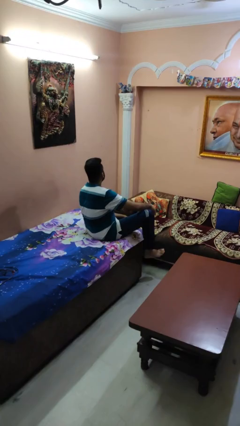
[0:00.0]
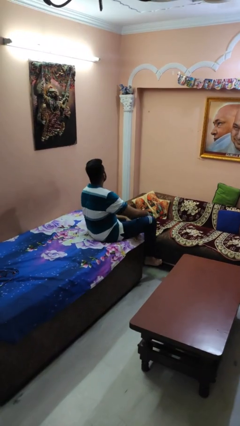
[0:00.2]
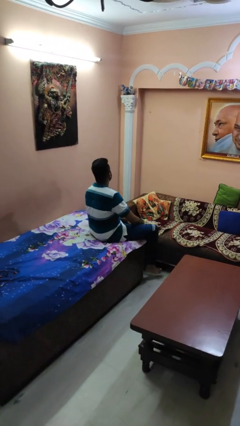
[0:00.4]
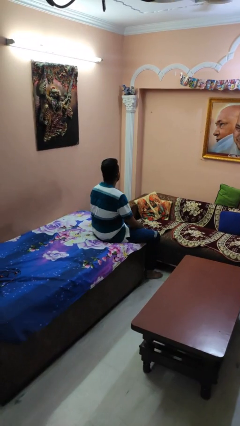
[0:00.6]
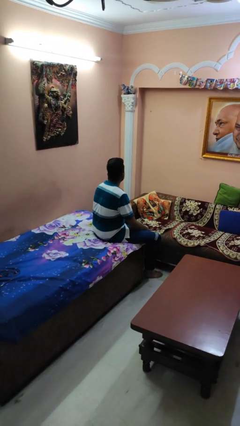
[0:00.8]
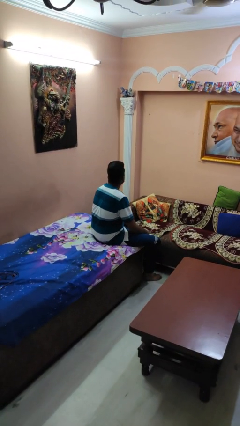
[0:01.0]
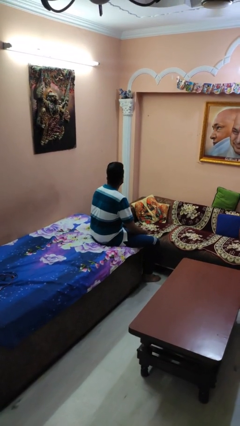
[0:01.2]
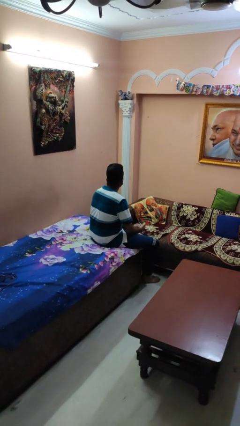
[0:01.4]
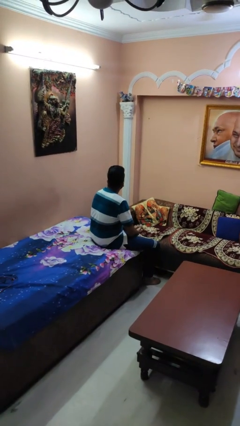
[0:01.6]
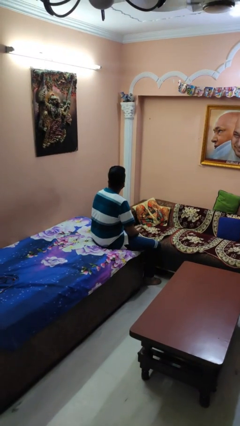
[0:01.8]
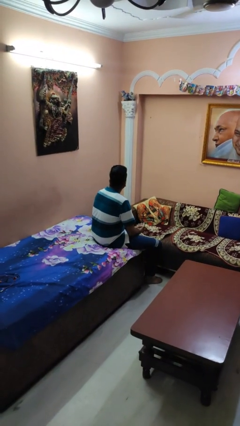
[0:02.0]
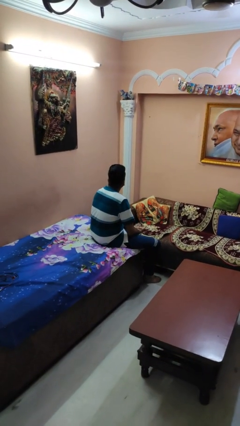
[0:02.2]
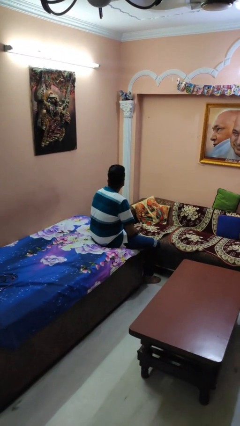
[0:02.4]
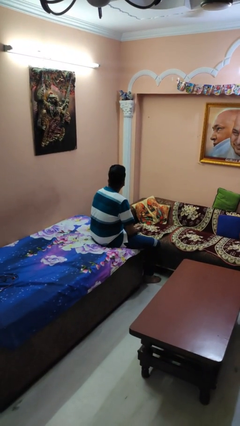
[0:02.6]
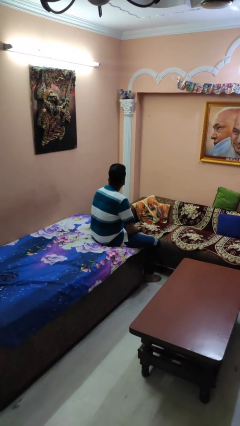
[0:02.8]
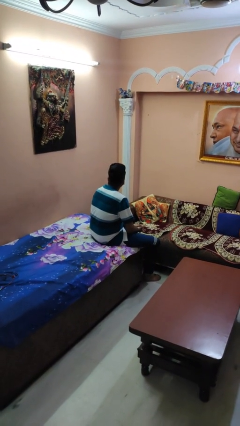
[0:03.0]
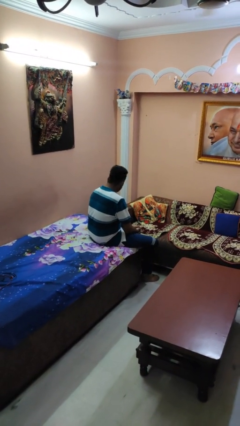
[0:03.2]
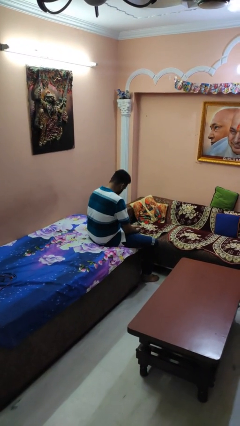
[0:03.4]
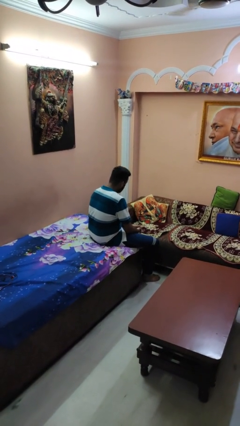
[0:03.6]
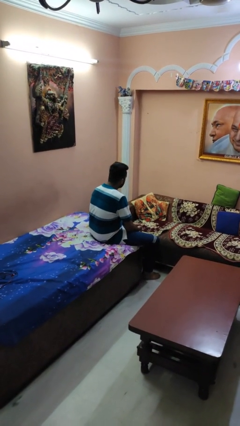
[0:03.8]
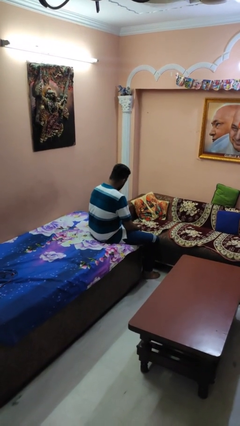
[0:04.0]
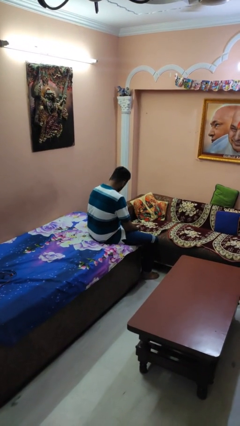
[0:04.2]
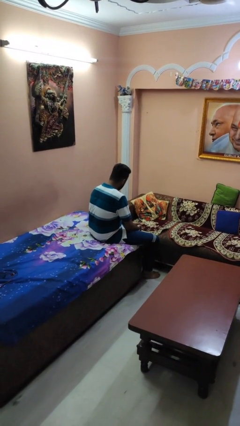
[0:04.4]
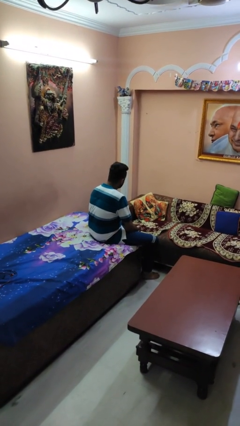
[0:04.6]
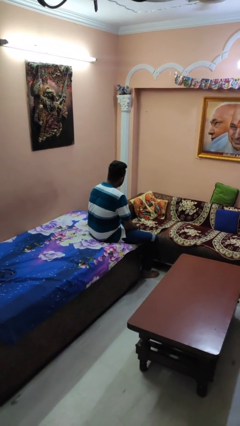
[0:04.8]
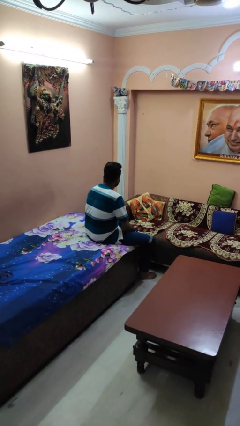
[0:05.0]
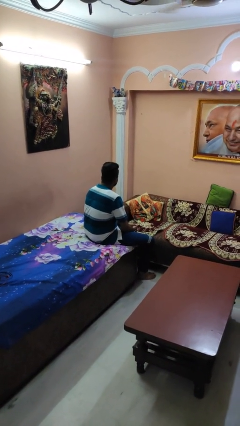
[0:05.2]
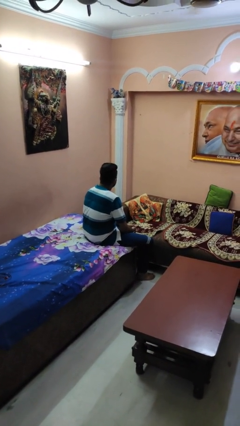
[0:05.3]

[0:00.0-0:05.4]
person nods head

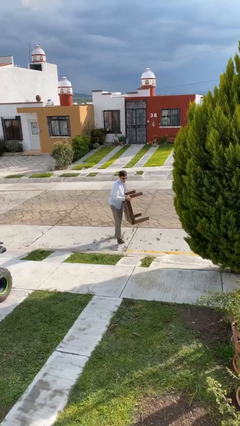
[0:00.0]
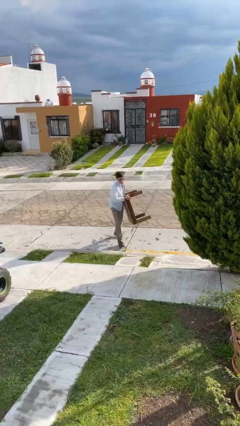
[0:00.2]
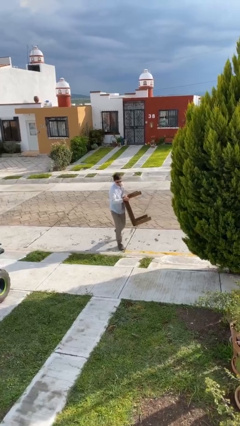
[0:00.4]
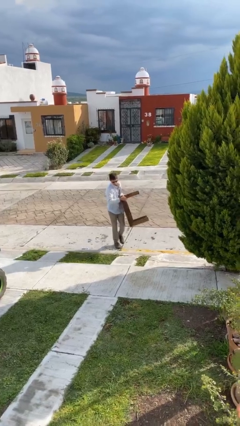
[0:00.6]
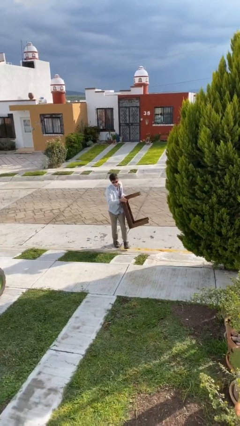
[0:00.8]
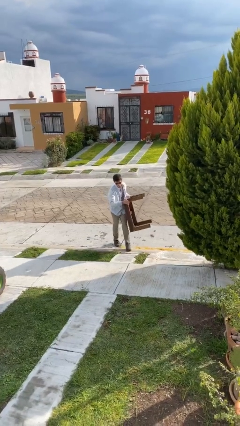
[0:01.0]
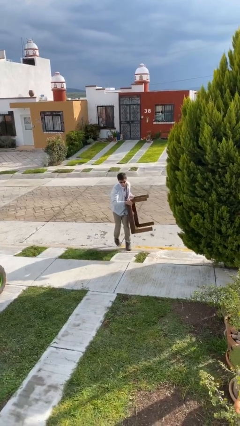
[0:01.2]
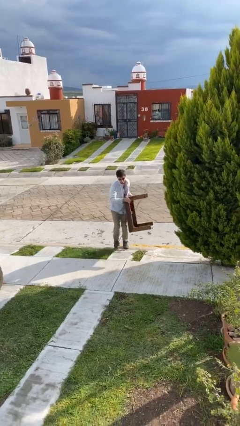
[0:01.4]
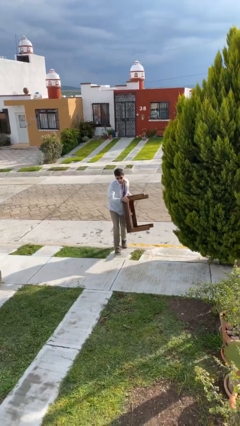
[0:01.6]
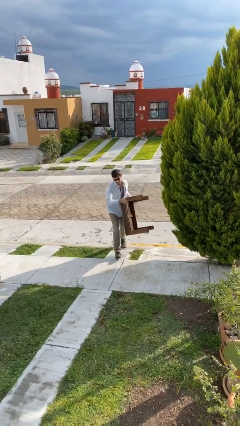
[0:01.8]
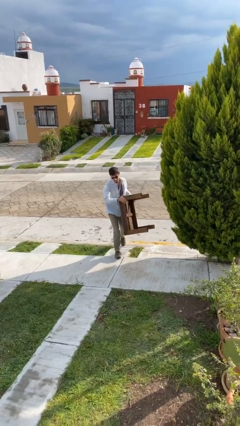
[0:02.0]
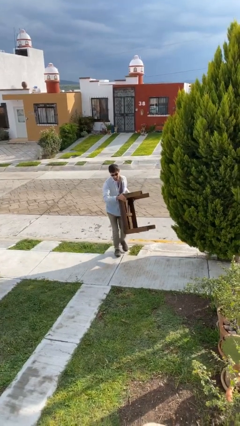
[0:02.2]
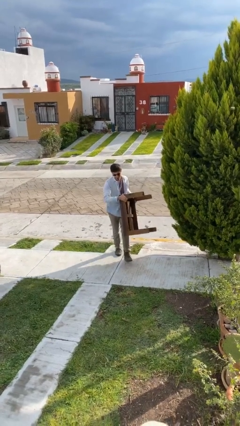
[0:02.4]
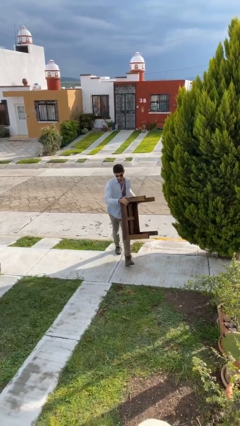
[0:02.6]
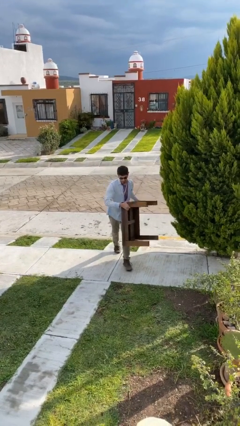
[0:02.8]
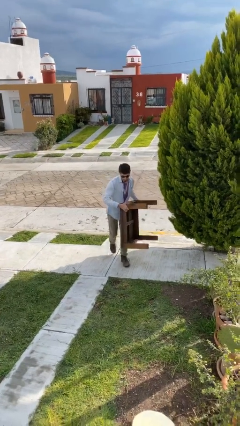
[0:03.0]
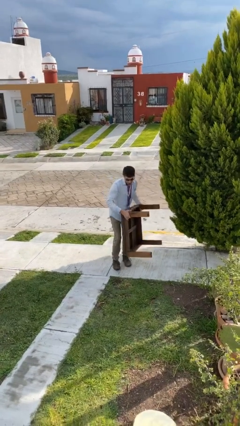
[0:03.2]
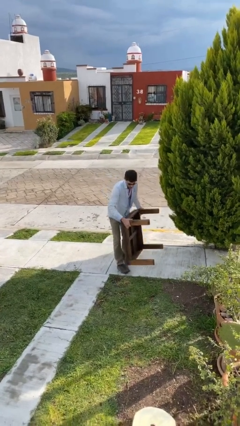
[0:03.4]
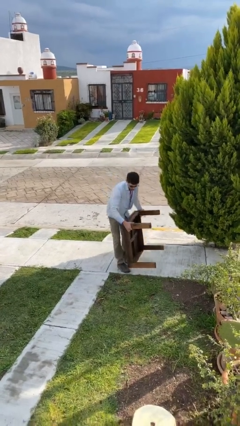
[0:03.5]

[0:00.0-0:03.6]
person carries heavy object

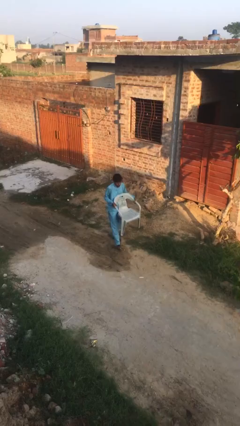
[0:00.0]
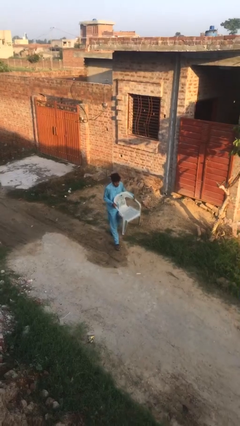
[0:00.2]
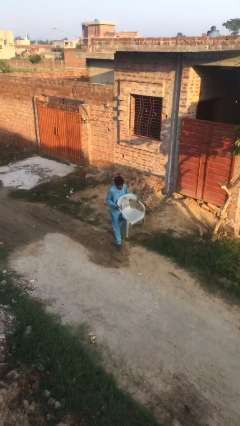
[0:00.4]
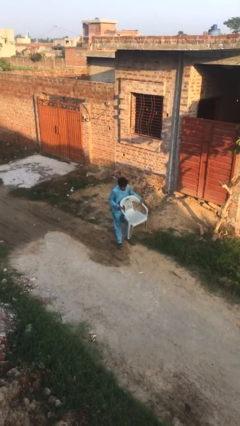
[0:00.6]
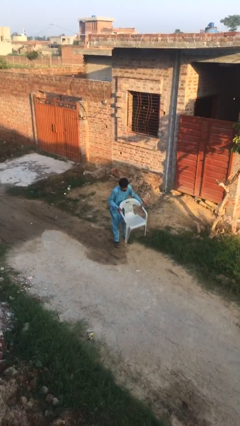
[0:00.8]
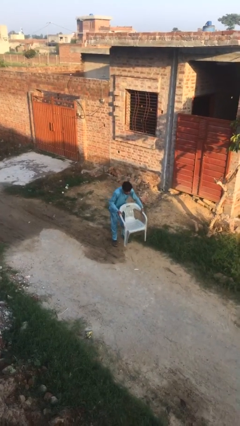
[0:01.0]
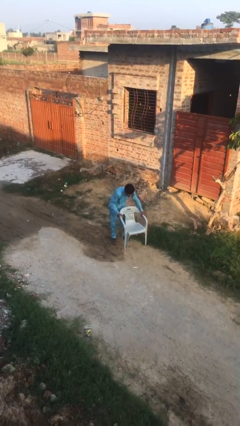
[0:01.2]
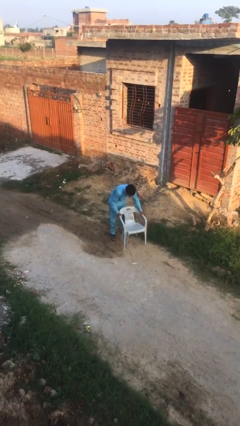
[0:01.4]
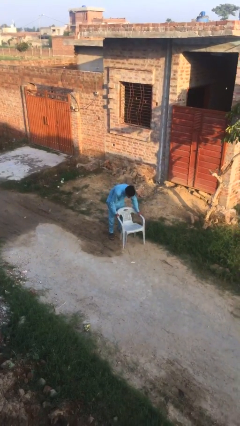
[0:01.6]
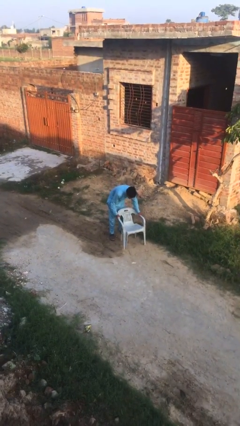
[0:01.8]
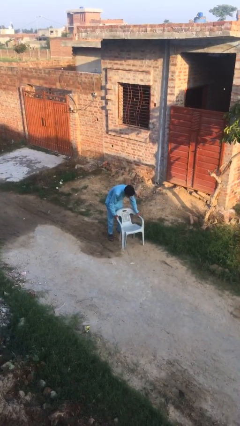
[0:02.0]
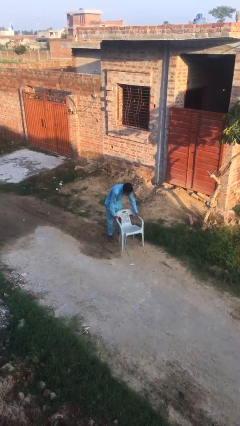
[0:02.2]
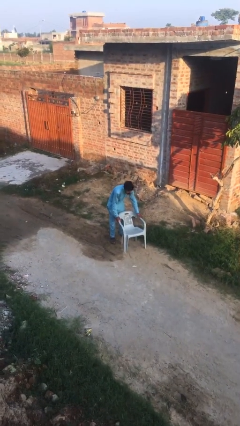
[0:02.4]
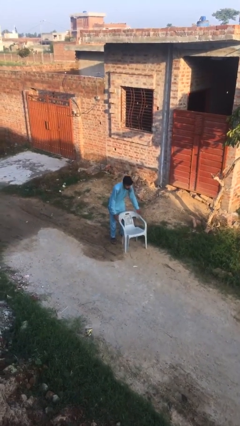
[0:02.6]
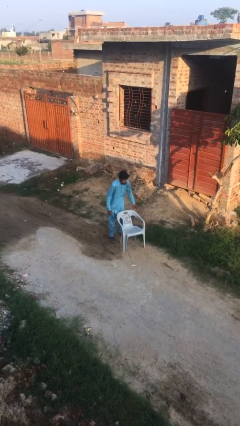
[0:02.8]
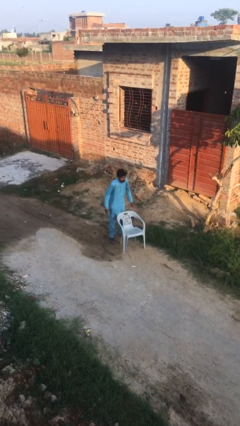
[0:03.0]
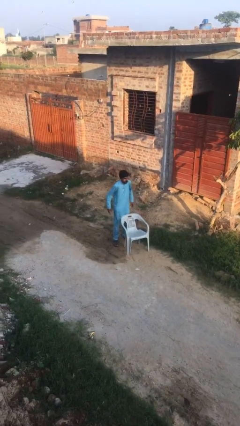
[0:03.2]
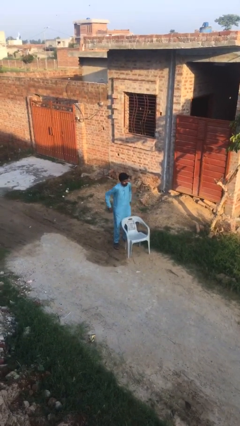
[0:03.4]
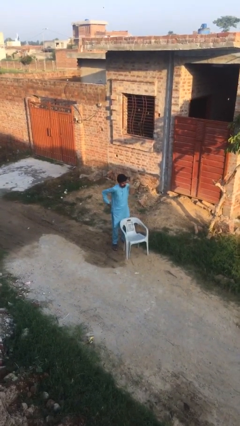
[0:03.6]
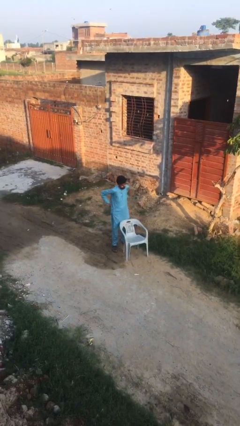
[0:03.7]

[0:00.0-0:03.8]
person puts down object on floor

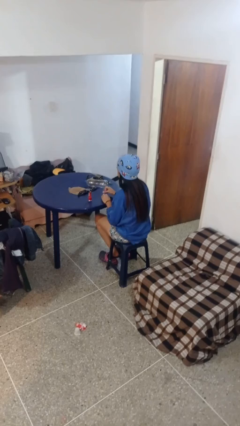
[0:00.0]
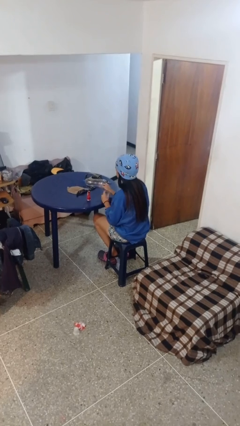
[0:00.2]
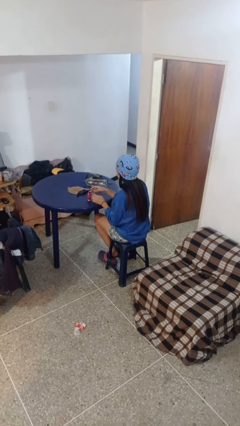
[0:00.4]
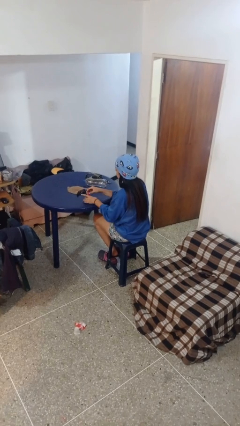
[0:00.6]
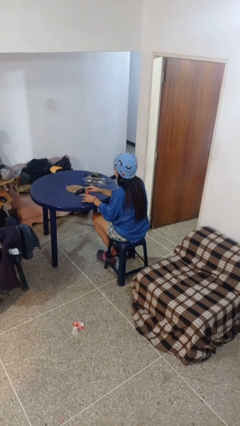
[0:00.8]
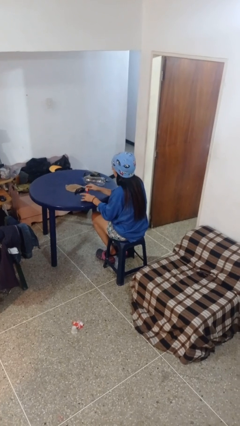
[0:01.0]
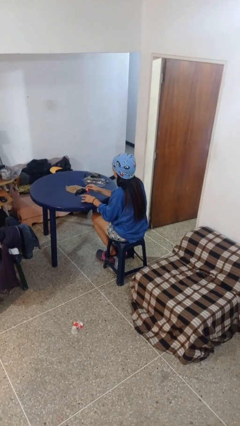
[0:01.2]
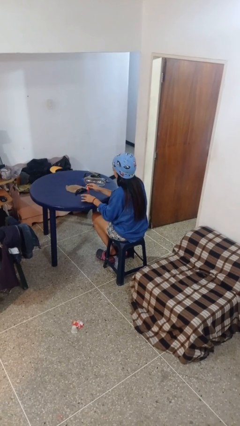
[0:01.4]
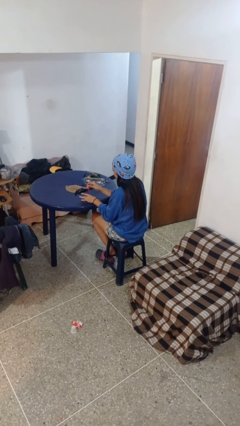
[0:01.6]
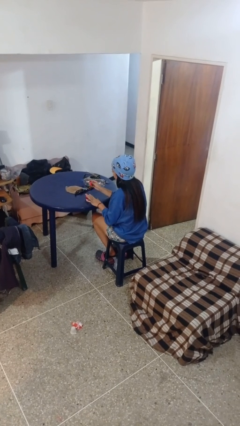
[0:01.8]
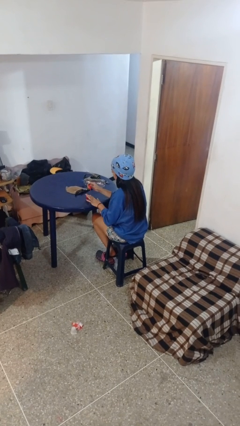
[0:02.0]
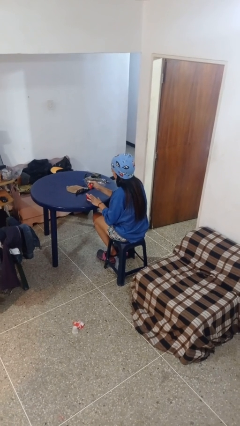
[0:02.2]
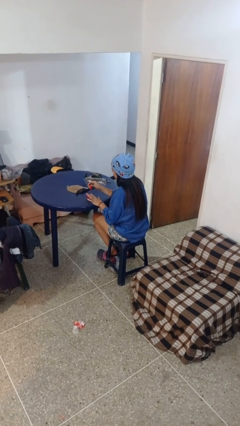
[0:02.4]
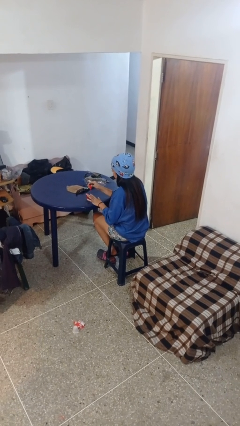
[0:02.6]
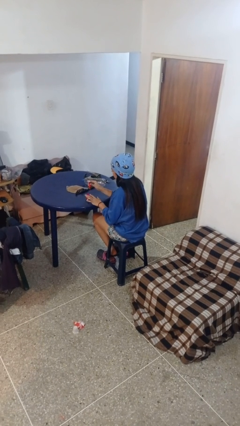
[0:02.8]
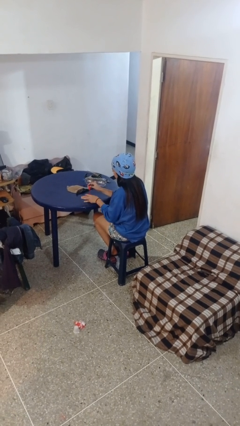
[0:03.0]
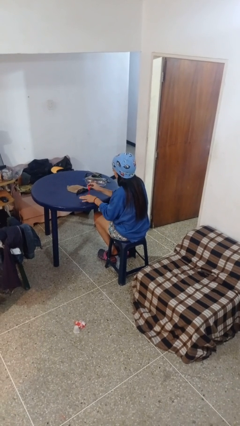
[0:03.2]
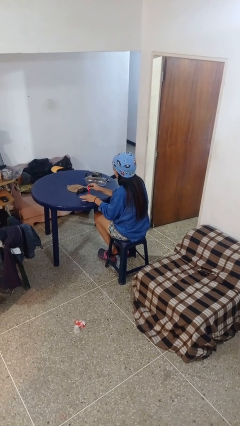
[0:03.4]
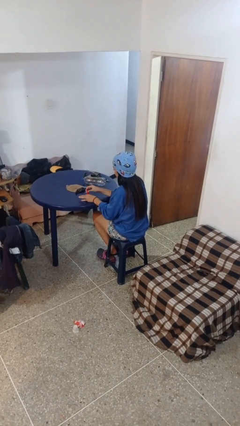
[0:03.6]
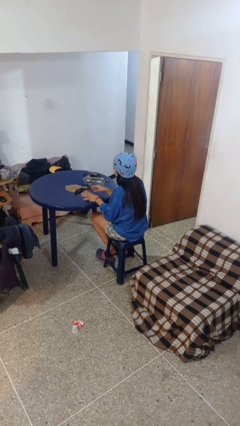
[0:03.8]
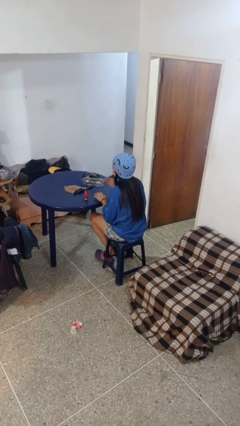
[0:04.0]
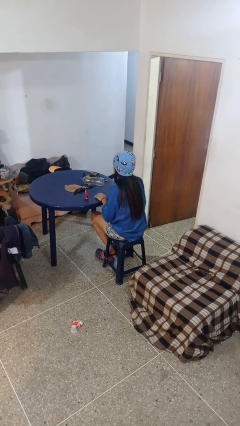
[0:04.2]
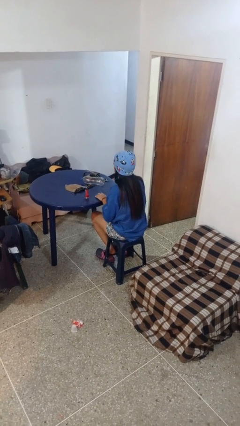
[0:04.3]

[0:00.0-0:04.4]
person paints fingernails

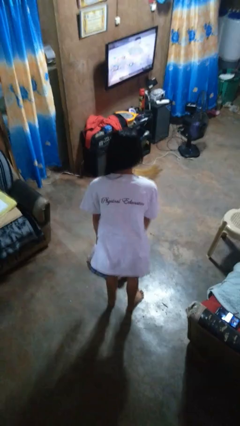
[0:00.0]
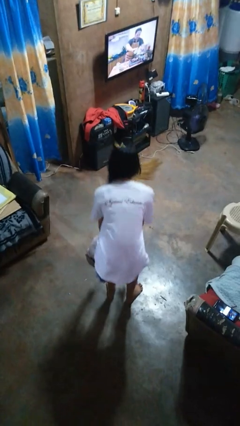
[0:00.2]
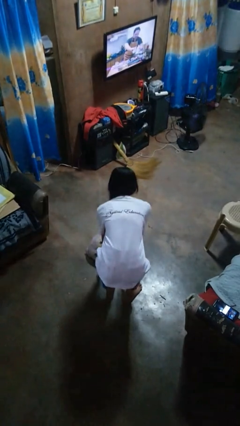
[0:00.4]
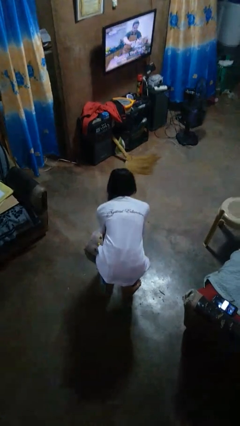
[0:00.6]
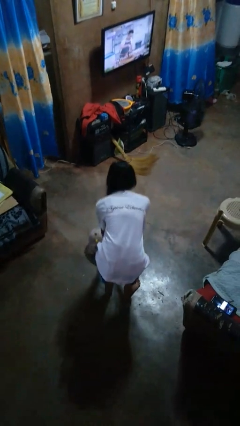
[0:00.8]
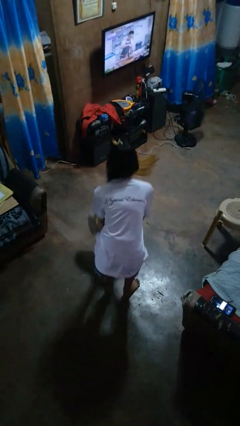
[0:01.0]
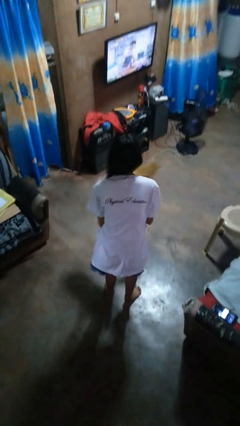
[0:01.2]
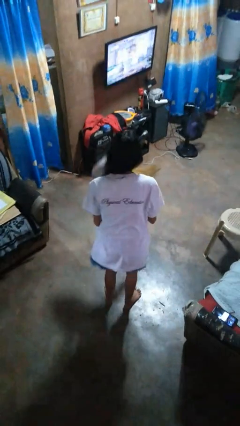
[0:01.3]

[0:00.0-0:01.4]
person picks up object from floor
